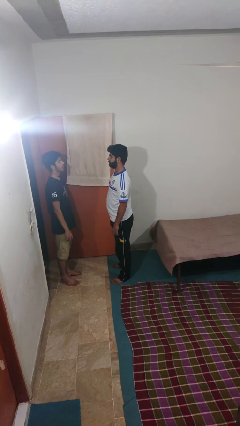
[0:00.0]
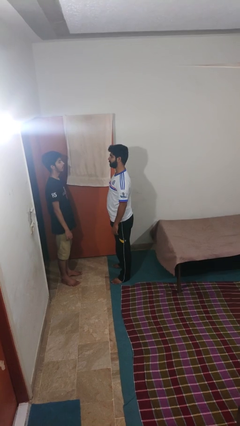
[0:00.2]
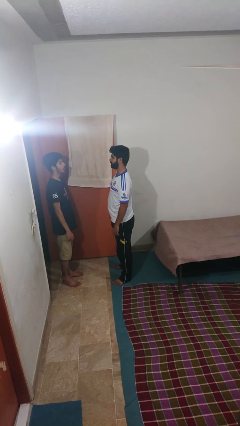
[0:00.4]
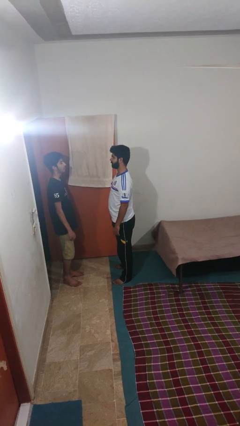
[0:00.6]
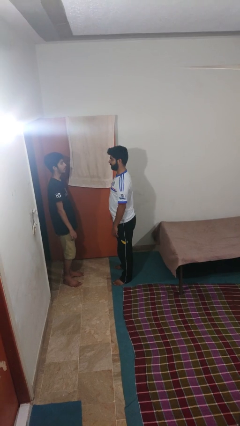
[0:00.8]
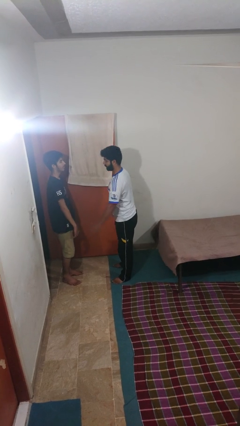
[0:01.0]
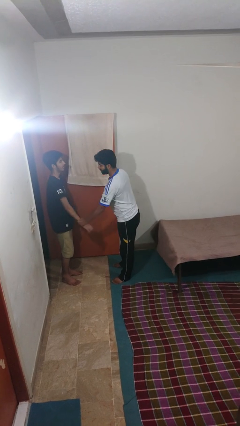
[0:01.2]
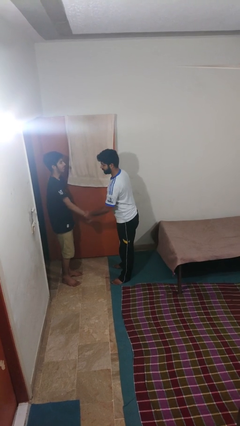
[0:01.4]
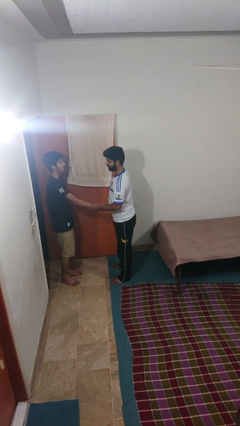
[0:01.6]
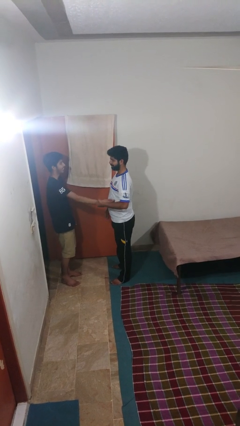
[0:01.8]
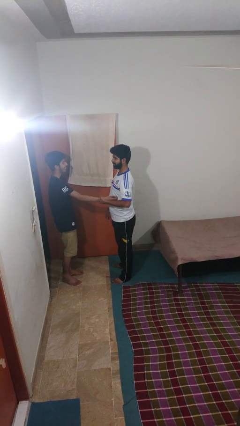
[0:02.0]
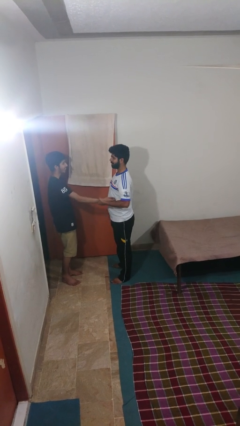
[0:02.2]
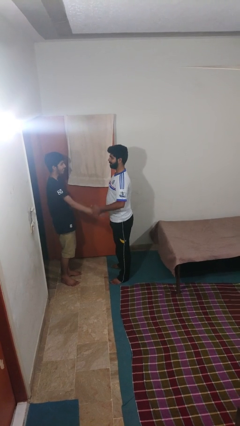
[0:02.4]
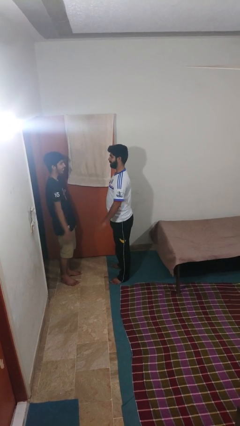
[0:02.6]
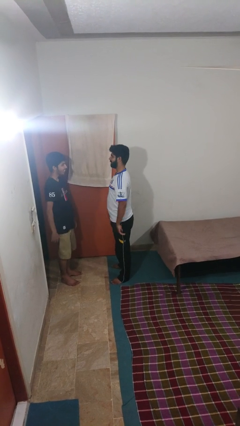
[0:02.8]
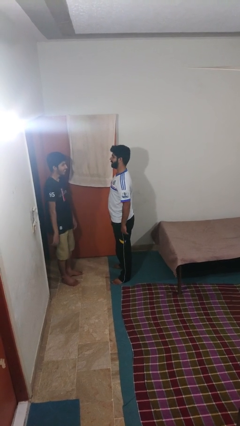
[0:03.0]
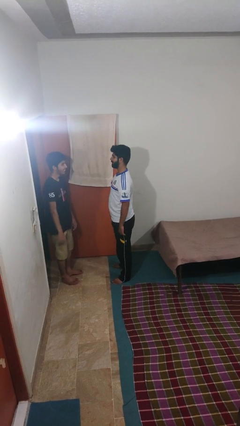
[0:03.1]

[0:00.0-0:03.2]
person grabs person by forearm

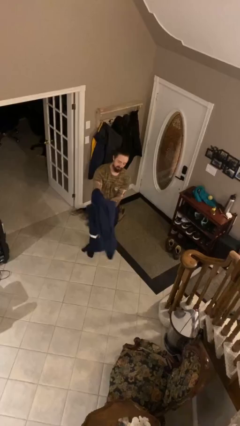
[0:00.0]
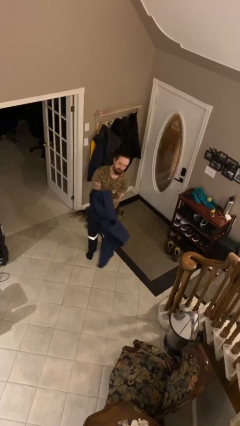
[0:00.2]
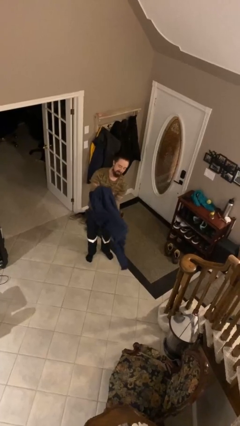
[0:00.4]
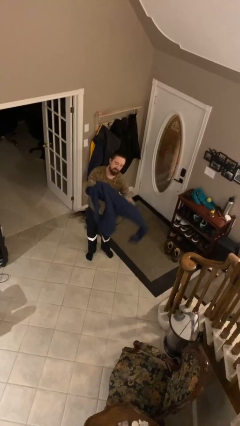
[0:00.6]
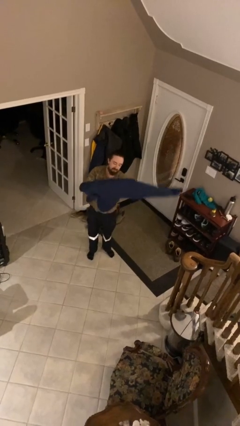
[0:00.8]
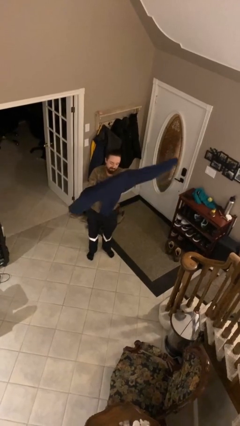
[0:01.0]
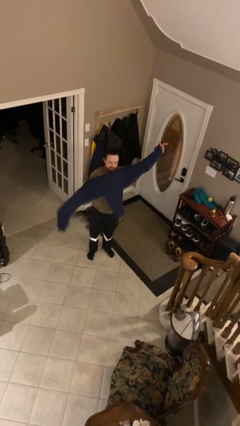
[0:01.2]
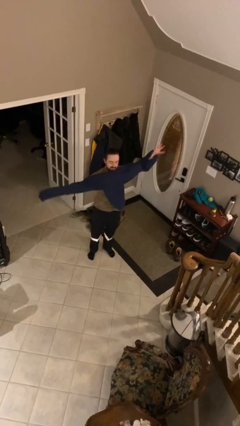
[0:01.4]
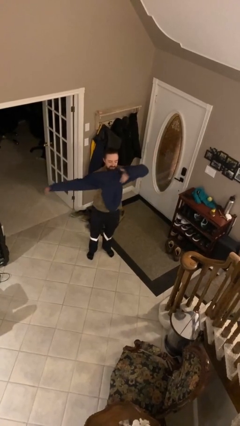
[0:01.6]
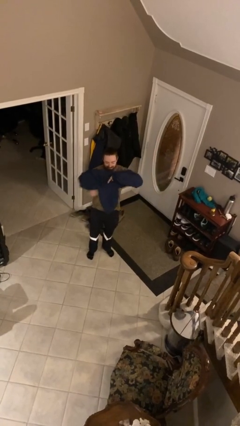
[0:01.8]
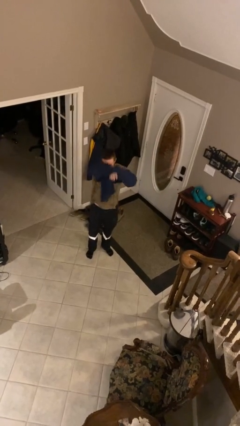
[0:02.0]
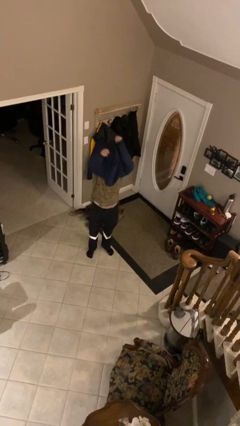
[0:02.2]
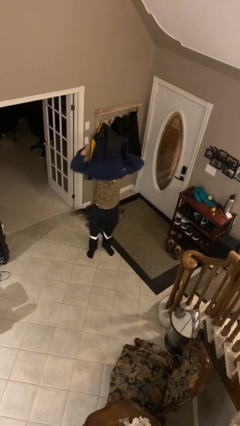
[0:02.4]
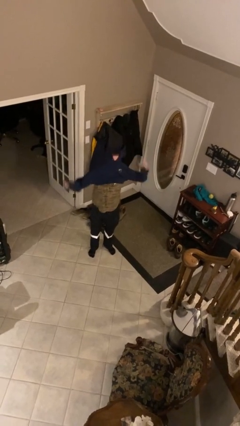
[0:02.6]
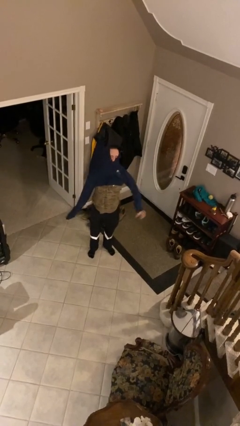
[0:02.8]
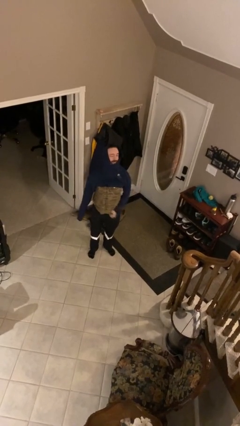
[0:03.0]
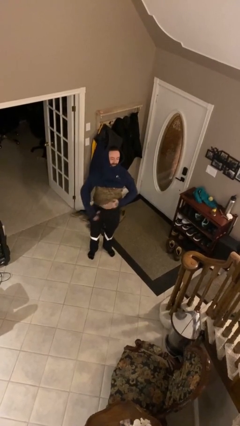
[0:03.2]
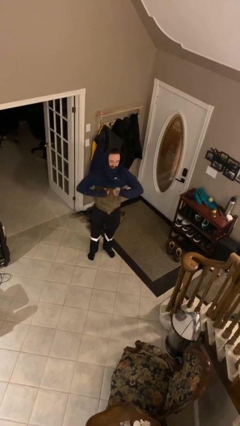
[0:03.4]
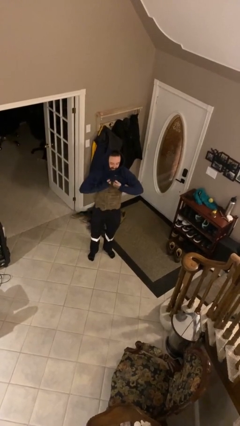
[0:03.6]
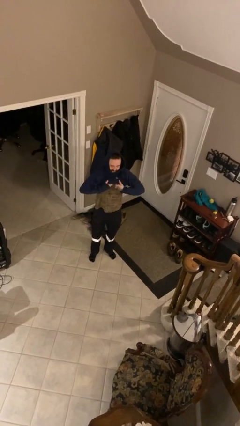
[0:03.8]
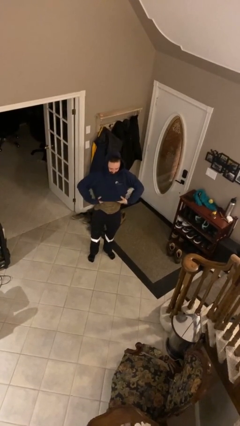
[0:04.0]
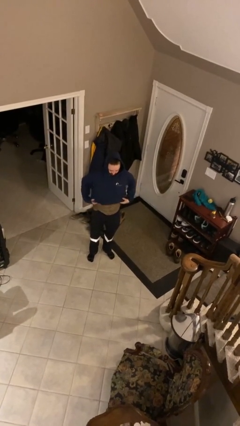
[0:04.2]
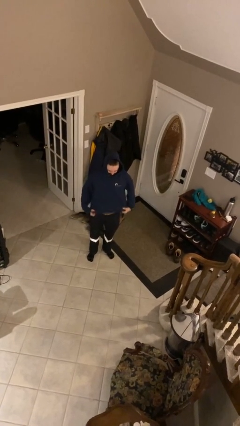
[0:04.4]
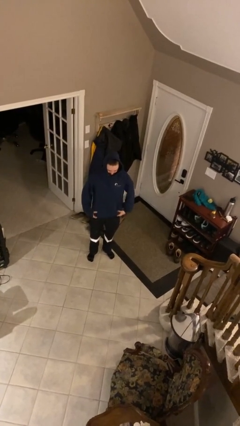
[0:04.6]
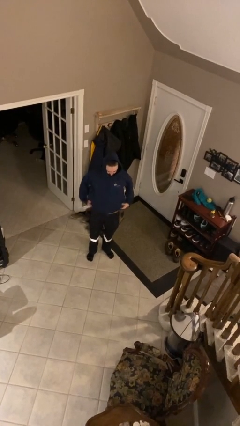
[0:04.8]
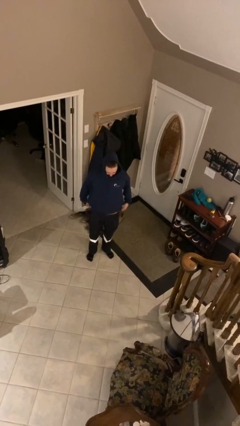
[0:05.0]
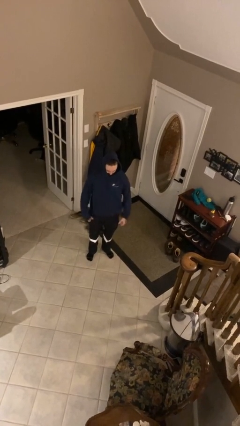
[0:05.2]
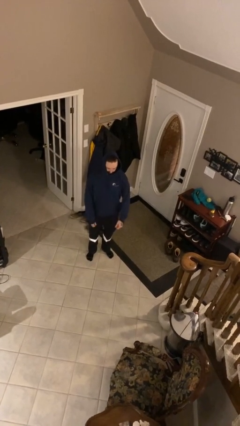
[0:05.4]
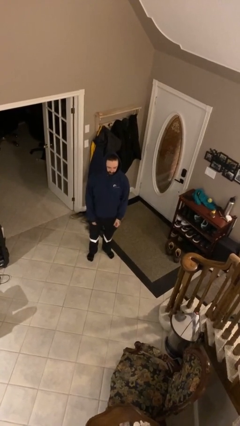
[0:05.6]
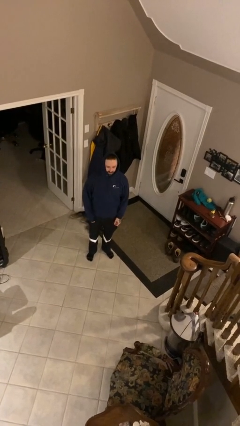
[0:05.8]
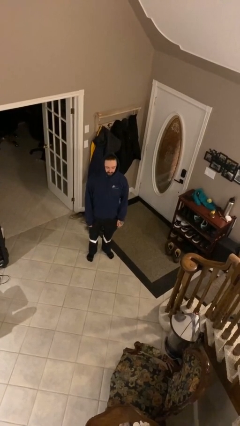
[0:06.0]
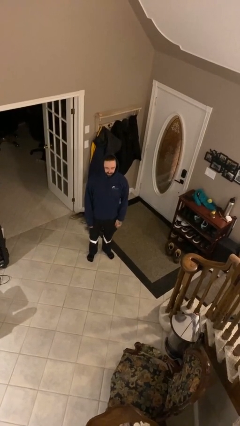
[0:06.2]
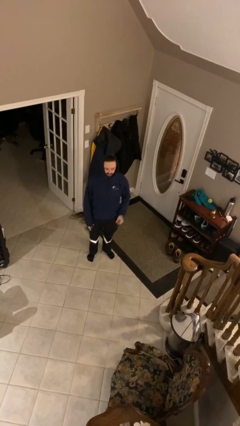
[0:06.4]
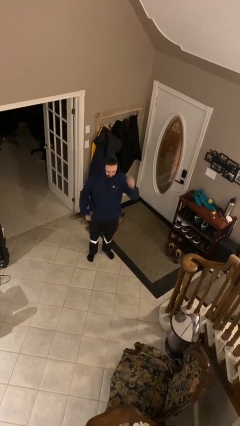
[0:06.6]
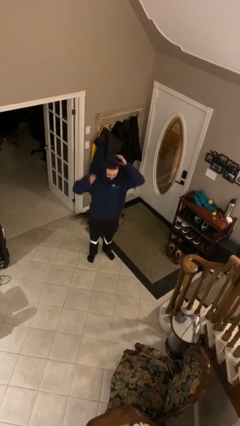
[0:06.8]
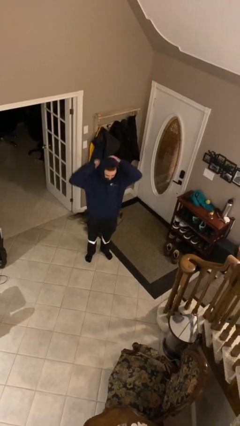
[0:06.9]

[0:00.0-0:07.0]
person puts on hoodie

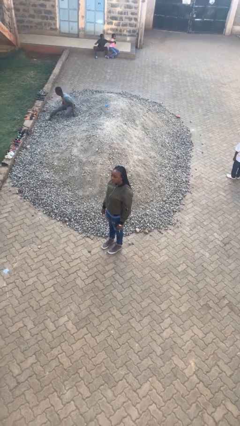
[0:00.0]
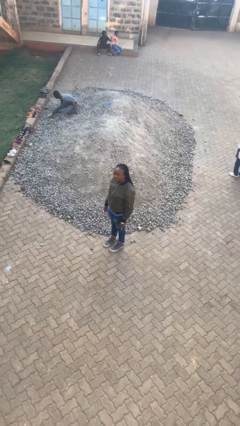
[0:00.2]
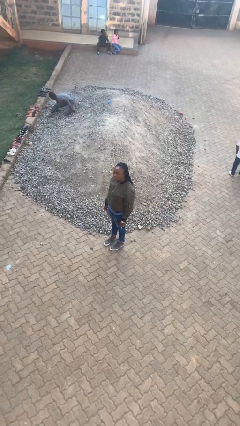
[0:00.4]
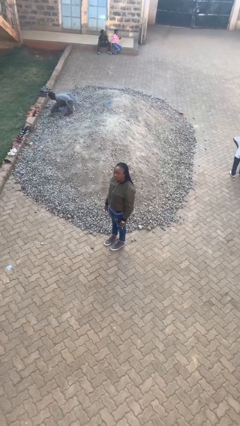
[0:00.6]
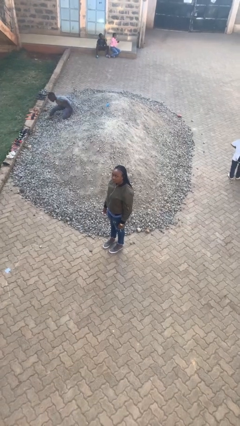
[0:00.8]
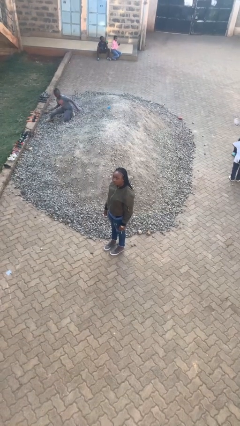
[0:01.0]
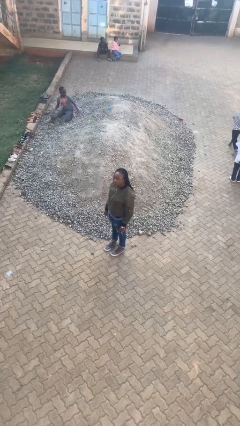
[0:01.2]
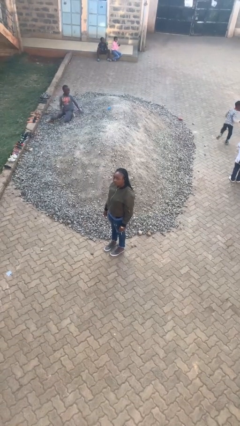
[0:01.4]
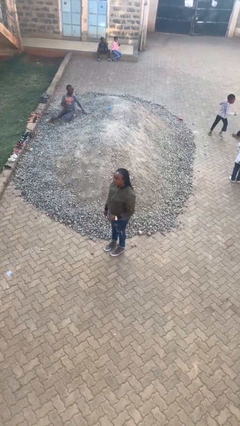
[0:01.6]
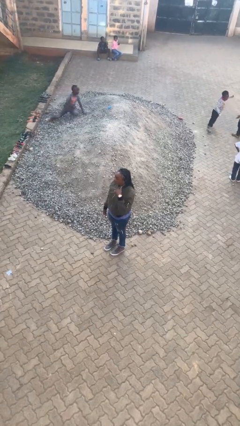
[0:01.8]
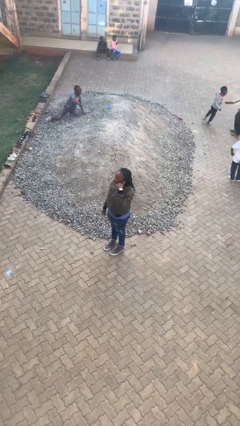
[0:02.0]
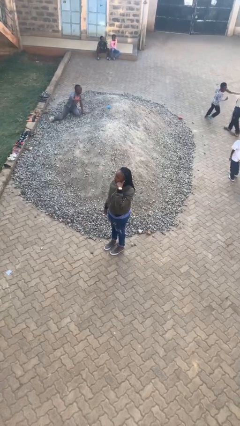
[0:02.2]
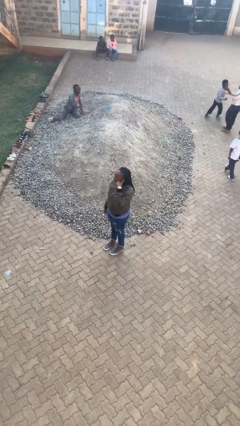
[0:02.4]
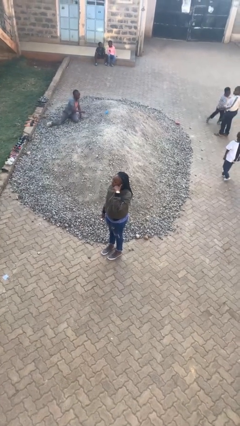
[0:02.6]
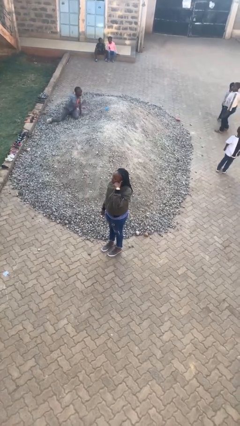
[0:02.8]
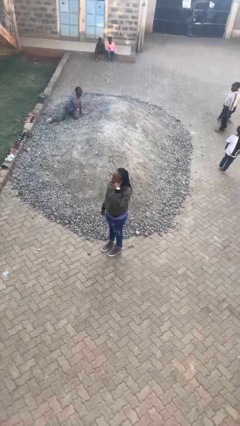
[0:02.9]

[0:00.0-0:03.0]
person gestures call me

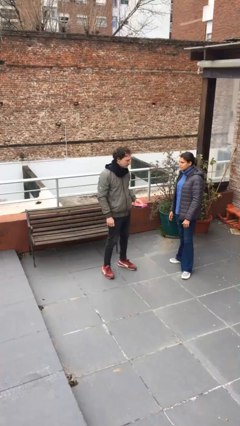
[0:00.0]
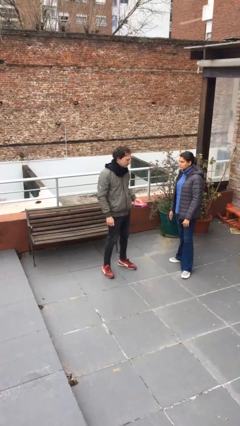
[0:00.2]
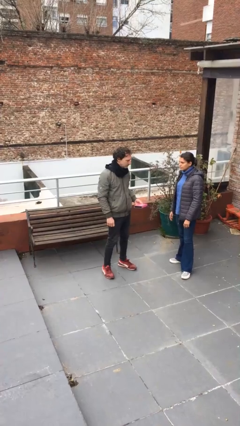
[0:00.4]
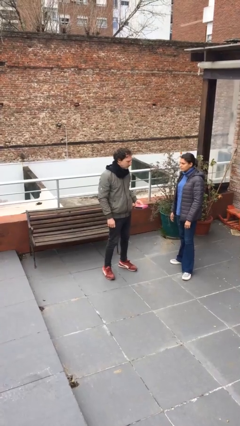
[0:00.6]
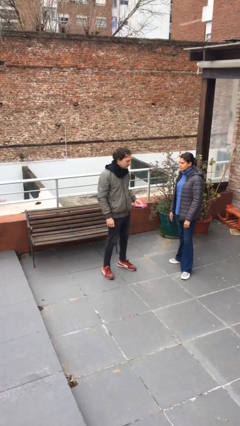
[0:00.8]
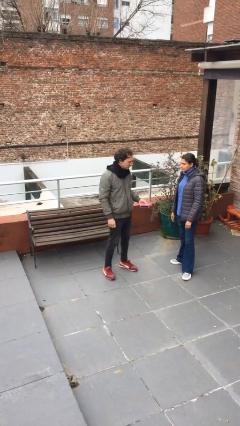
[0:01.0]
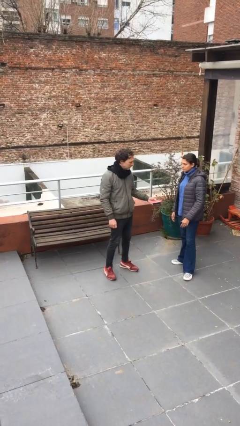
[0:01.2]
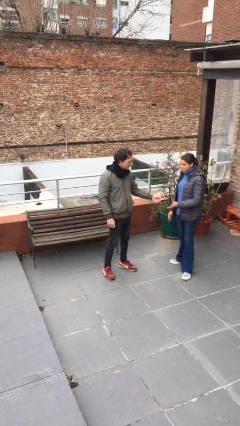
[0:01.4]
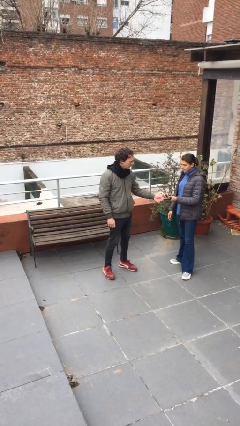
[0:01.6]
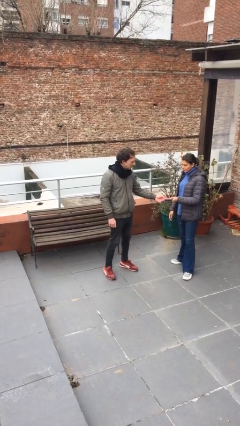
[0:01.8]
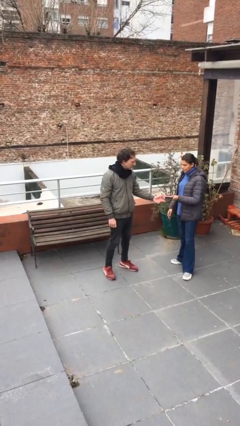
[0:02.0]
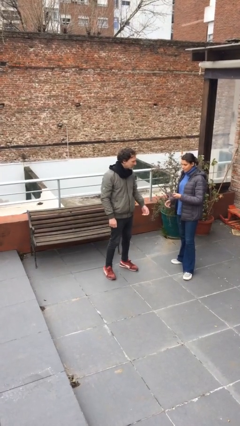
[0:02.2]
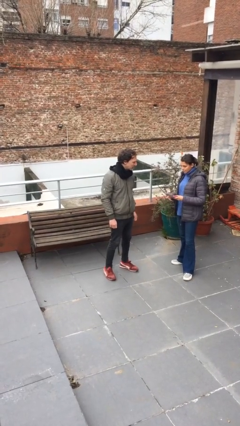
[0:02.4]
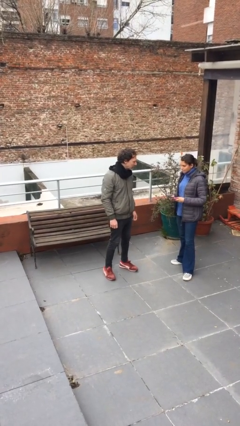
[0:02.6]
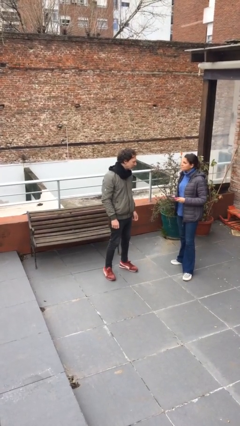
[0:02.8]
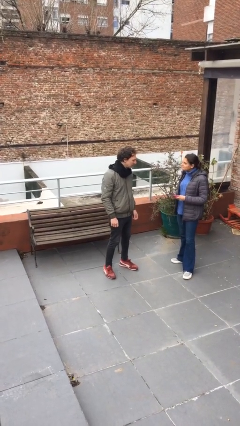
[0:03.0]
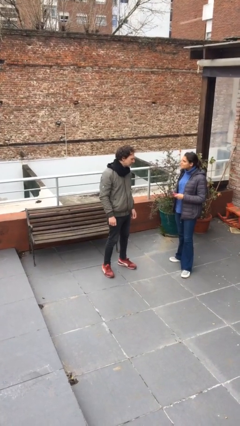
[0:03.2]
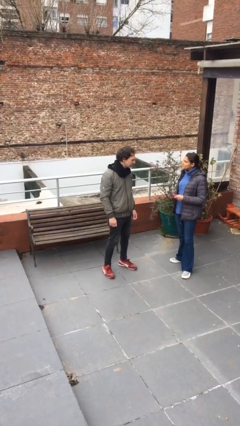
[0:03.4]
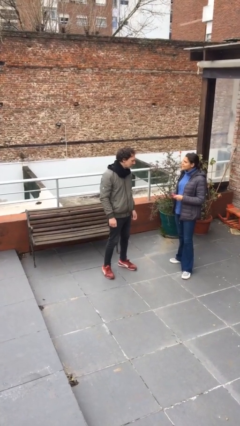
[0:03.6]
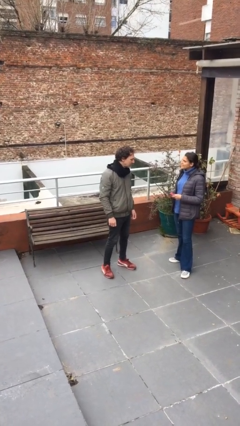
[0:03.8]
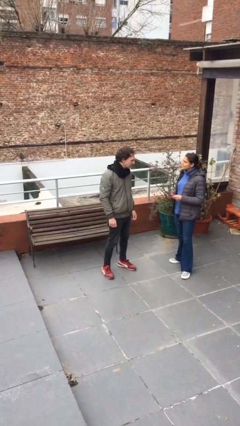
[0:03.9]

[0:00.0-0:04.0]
person transfers object to person

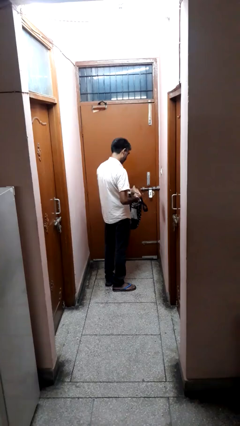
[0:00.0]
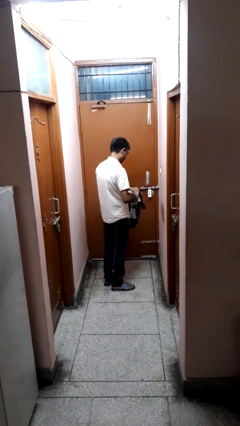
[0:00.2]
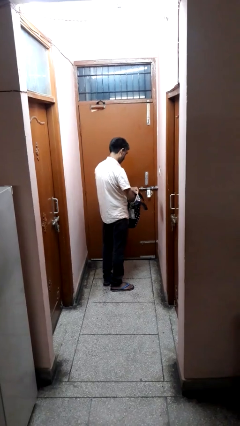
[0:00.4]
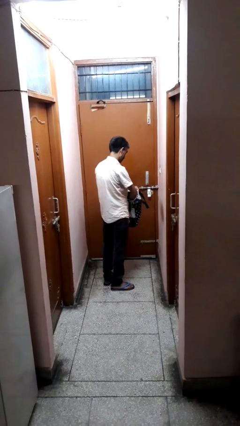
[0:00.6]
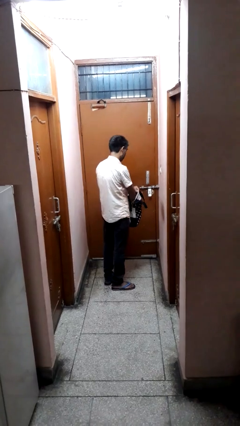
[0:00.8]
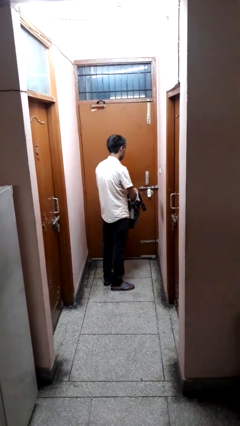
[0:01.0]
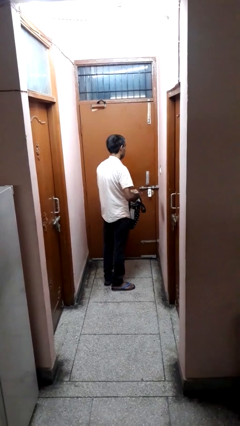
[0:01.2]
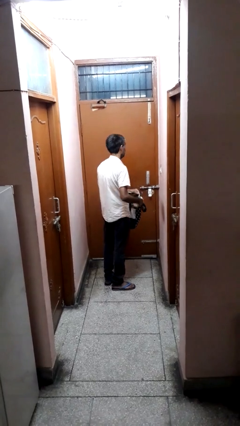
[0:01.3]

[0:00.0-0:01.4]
person puts object into bag
